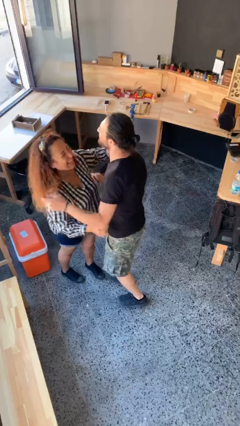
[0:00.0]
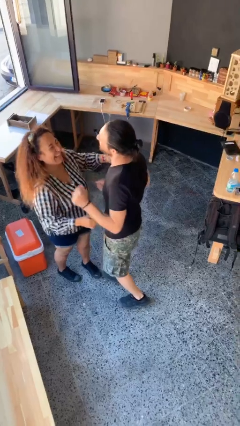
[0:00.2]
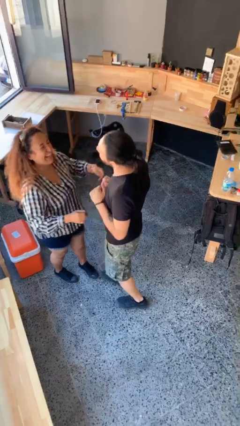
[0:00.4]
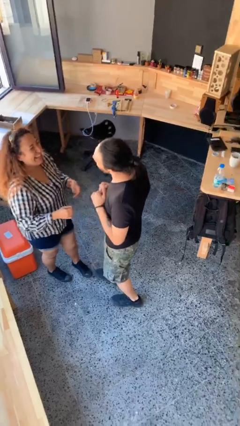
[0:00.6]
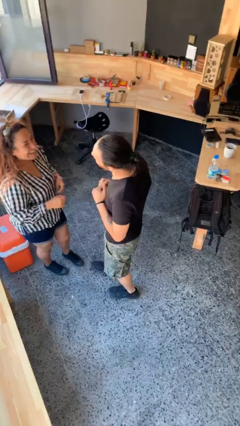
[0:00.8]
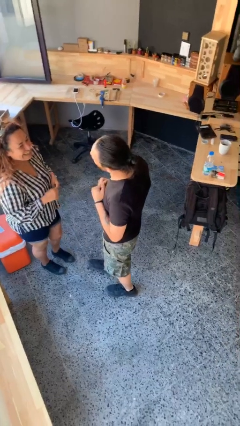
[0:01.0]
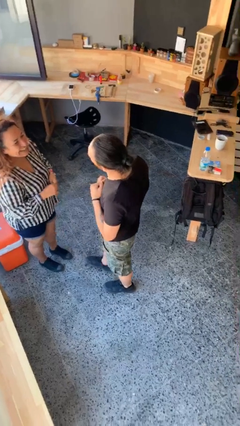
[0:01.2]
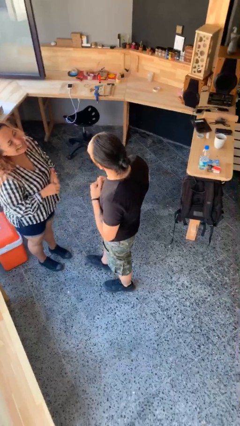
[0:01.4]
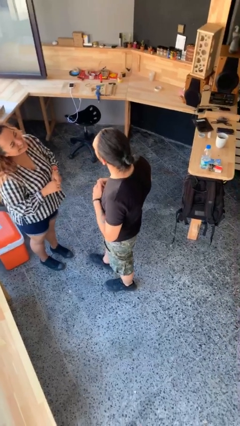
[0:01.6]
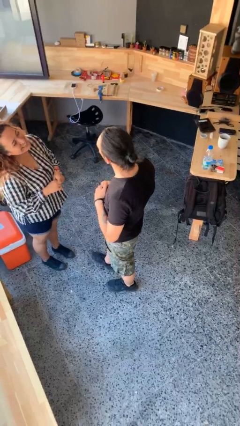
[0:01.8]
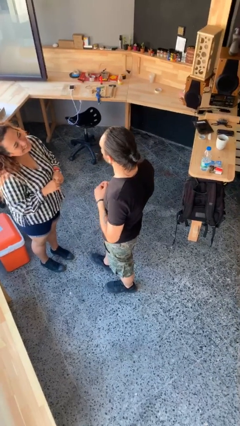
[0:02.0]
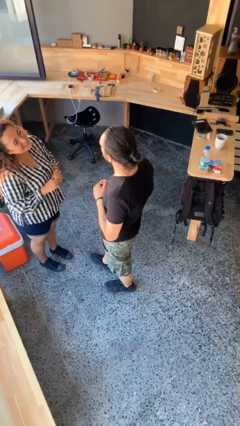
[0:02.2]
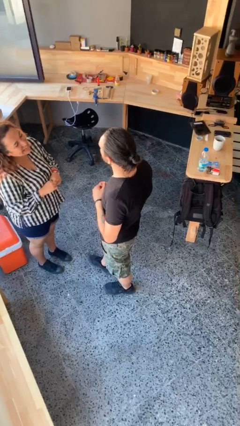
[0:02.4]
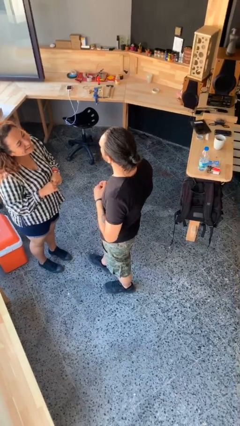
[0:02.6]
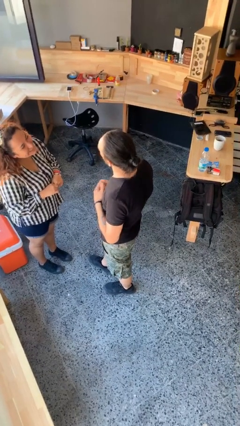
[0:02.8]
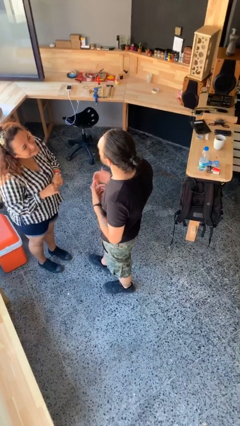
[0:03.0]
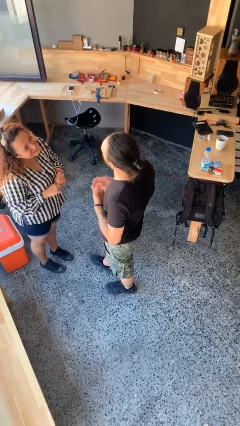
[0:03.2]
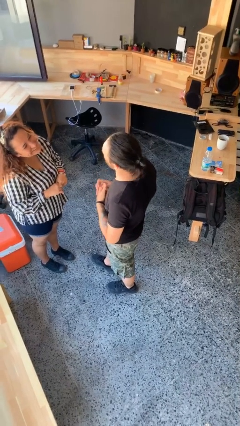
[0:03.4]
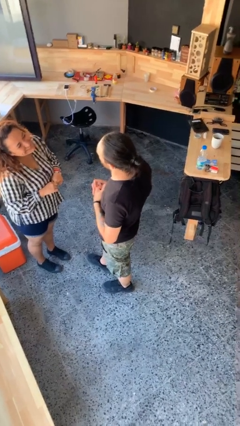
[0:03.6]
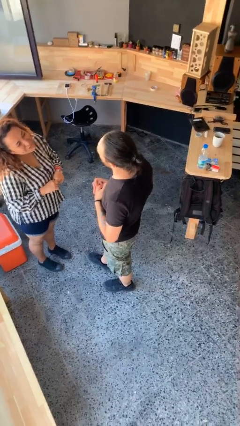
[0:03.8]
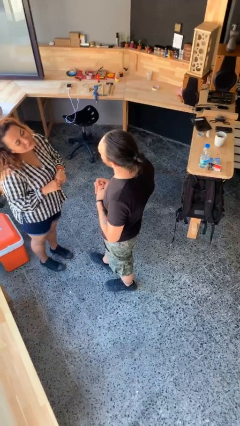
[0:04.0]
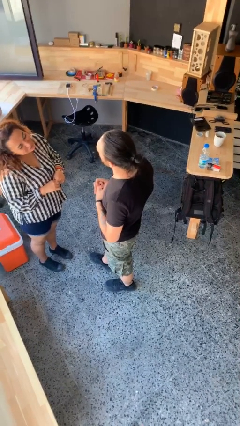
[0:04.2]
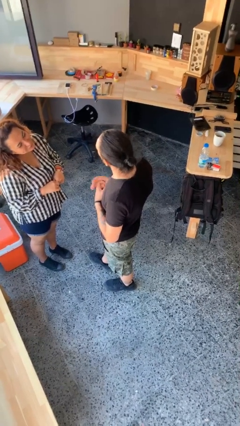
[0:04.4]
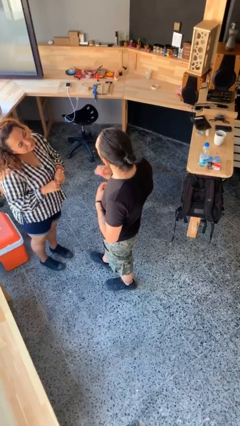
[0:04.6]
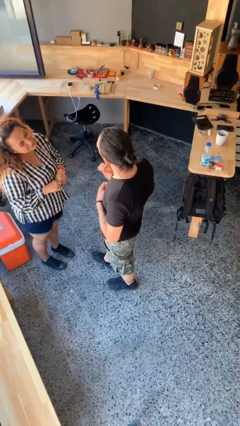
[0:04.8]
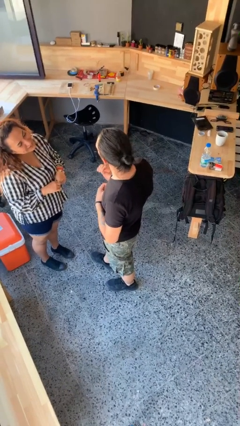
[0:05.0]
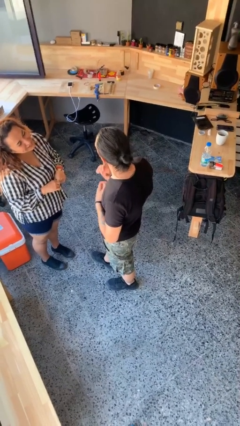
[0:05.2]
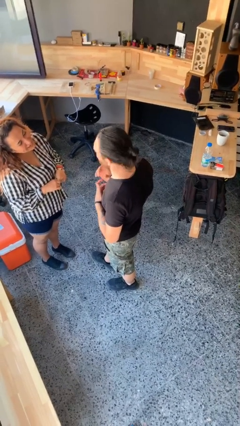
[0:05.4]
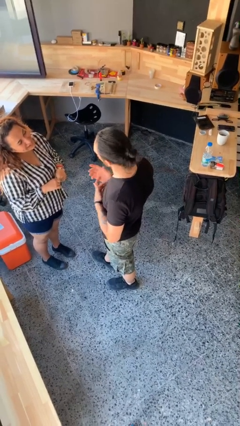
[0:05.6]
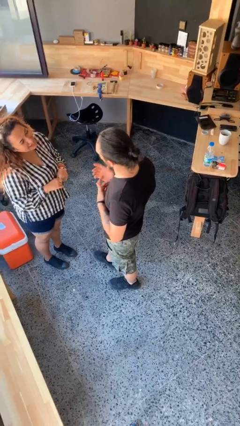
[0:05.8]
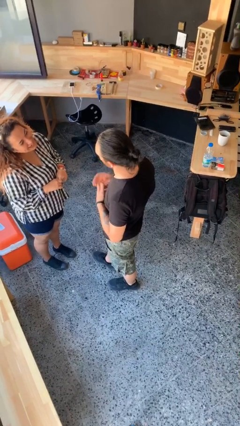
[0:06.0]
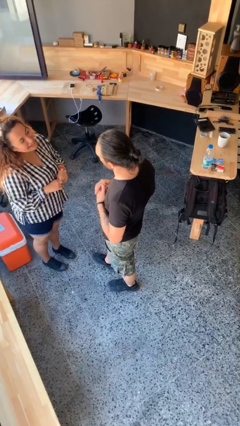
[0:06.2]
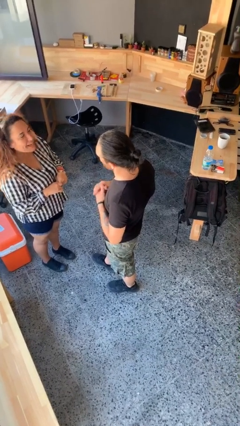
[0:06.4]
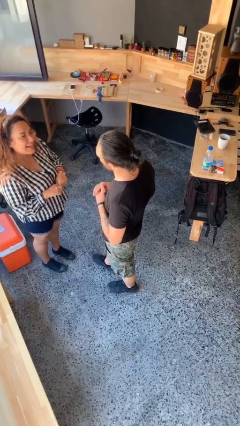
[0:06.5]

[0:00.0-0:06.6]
person talks to person

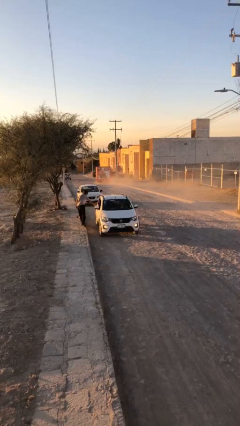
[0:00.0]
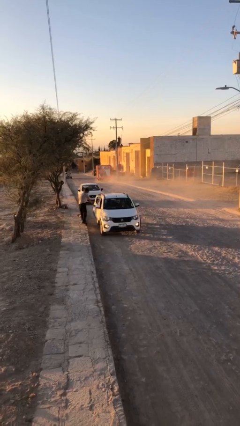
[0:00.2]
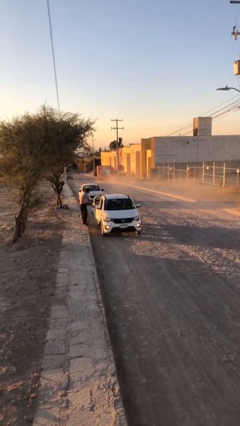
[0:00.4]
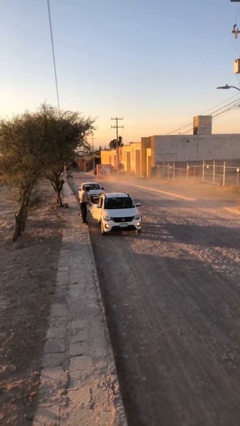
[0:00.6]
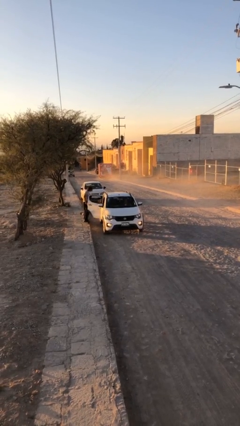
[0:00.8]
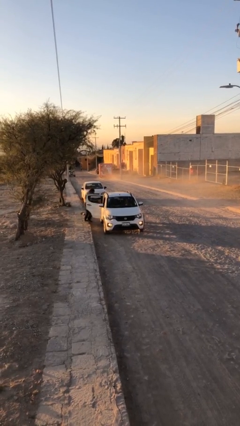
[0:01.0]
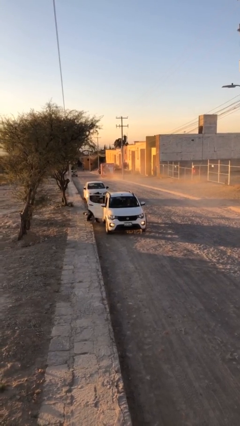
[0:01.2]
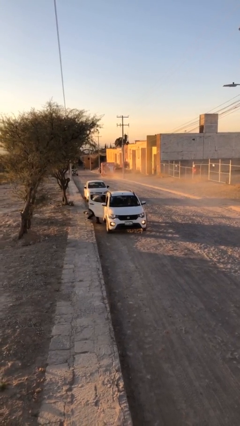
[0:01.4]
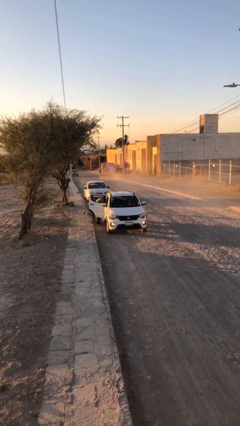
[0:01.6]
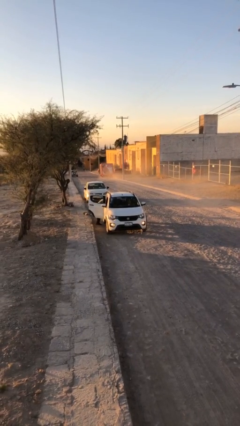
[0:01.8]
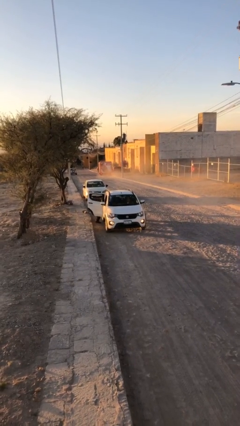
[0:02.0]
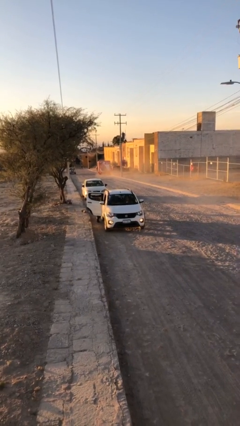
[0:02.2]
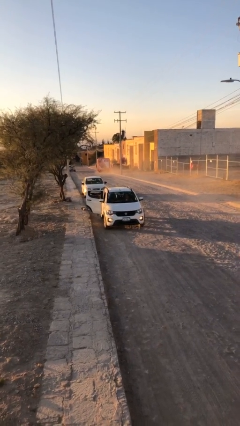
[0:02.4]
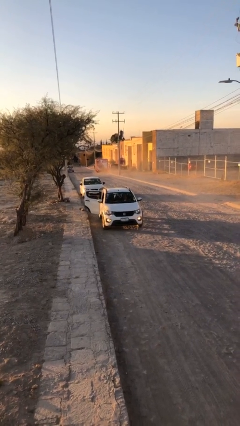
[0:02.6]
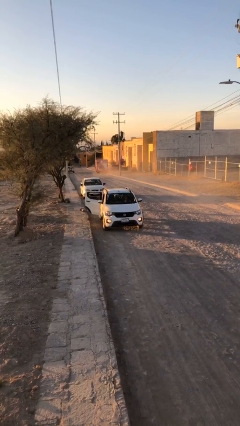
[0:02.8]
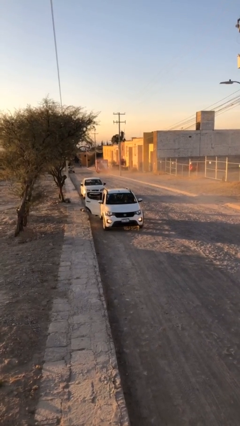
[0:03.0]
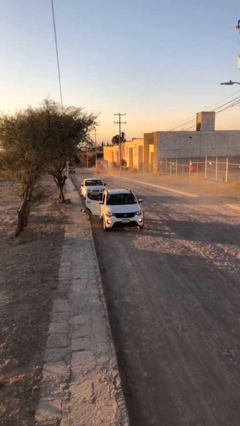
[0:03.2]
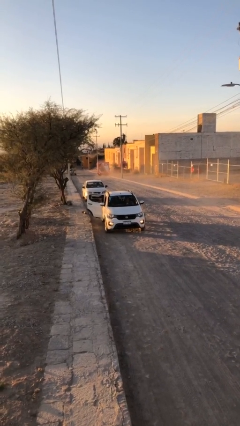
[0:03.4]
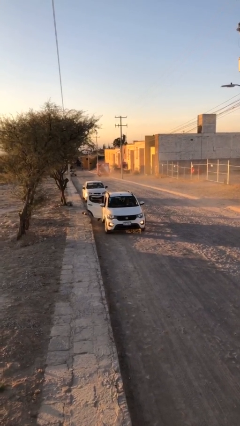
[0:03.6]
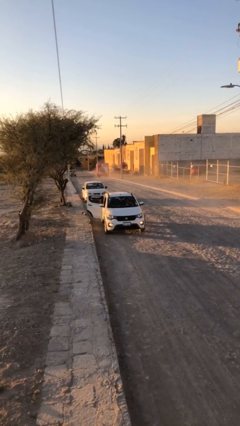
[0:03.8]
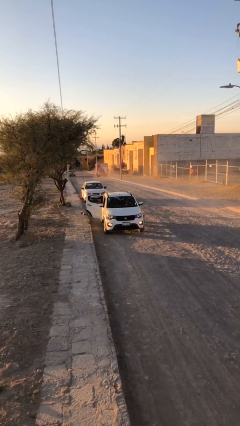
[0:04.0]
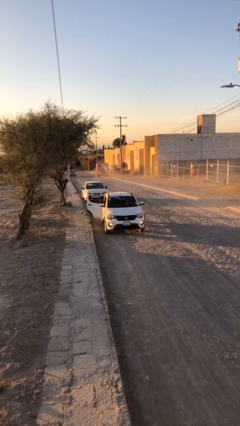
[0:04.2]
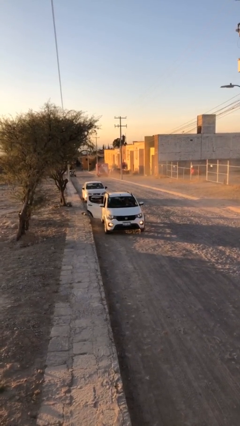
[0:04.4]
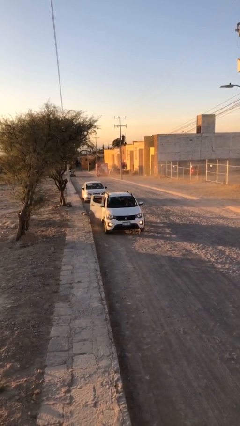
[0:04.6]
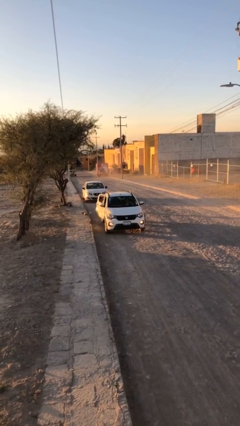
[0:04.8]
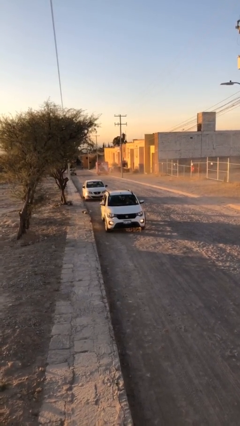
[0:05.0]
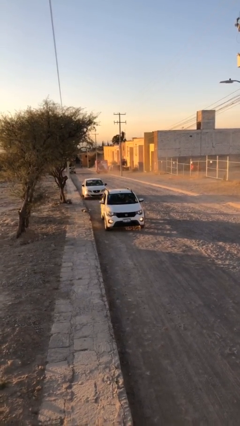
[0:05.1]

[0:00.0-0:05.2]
car picks up person

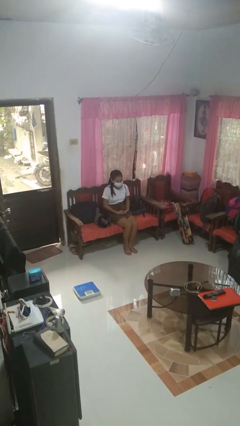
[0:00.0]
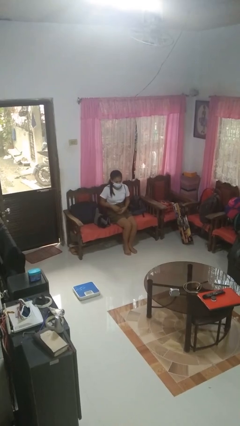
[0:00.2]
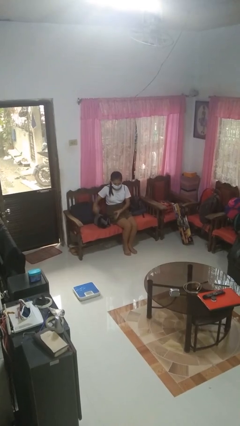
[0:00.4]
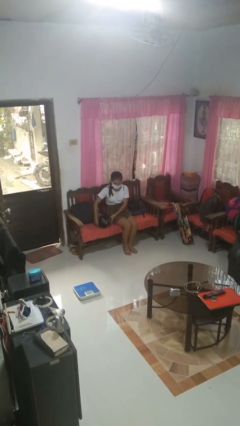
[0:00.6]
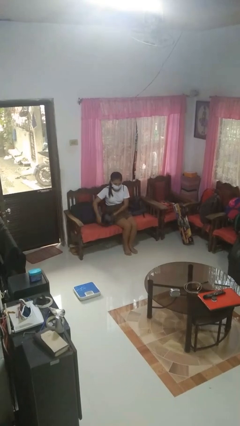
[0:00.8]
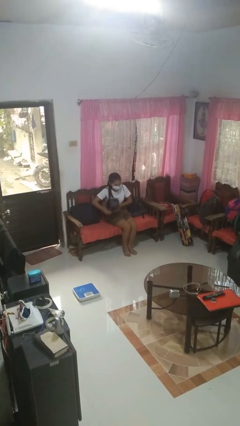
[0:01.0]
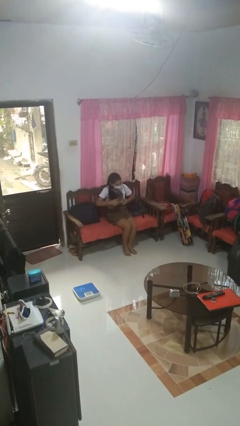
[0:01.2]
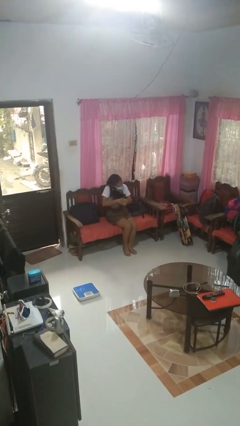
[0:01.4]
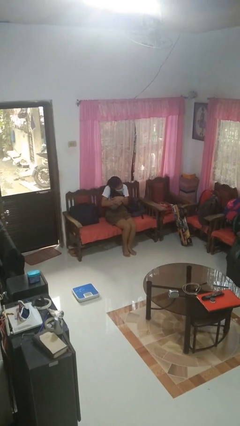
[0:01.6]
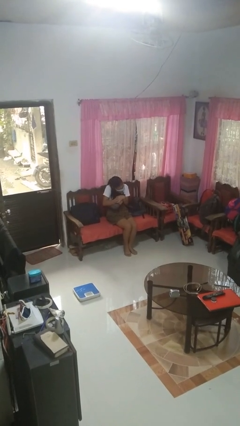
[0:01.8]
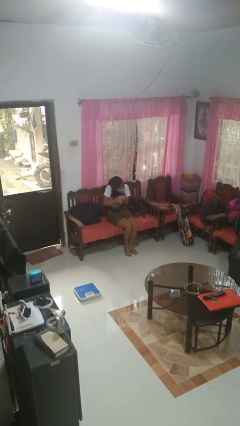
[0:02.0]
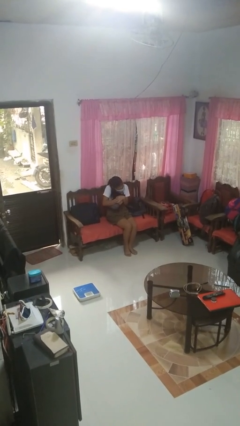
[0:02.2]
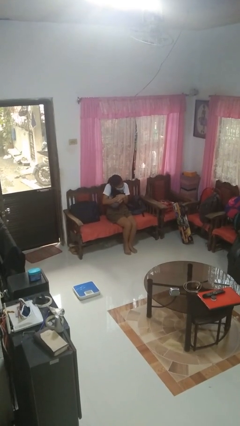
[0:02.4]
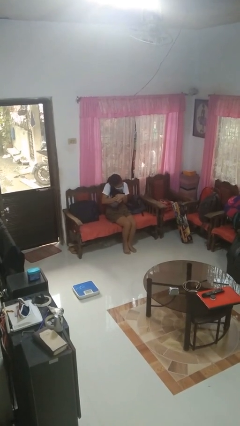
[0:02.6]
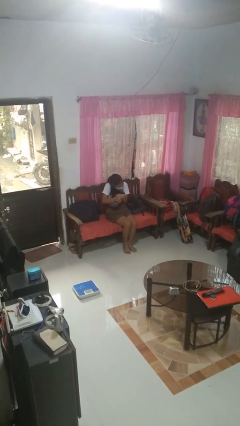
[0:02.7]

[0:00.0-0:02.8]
person hugs stuffed animal

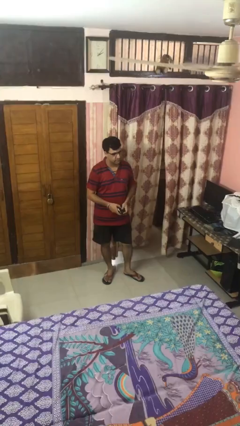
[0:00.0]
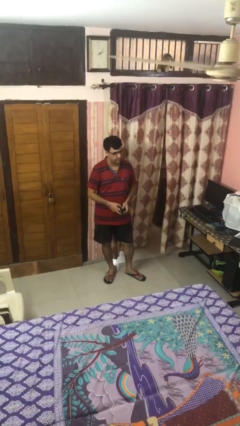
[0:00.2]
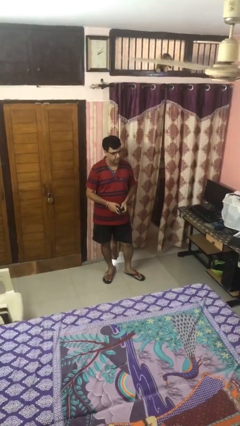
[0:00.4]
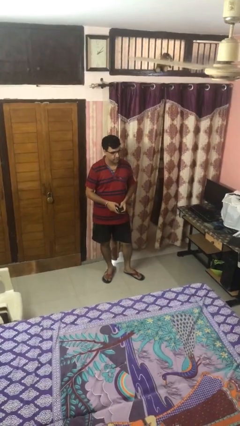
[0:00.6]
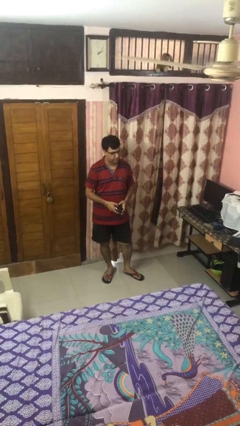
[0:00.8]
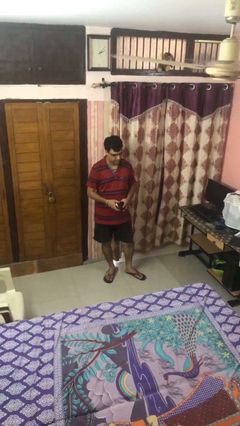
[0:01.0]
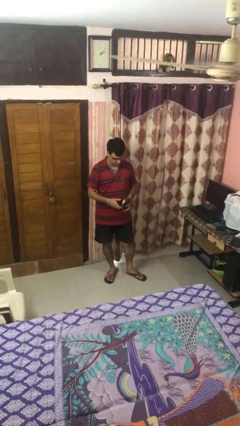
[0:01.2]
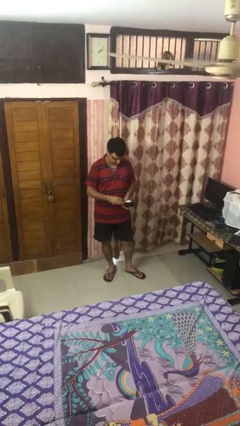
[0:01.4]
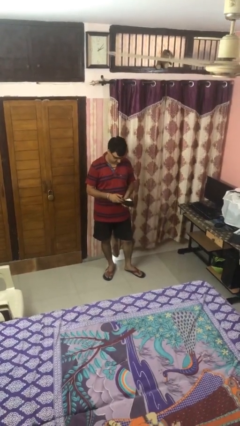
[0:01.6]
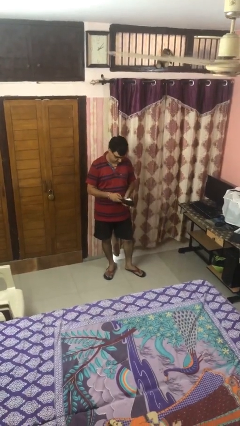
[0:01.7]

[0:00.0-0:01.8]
person searches in purse

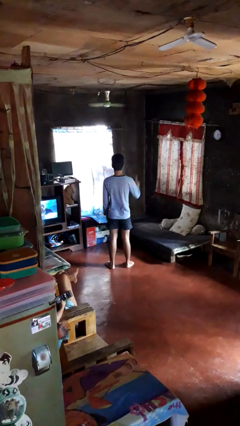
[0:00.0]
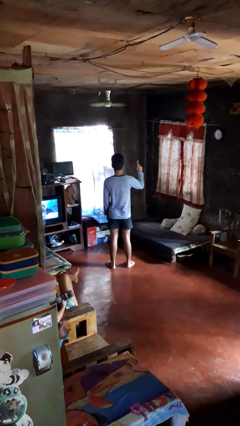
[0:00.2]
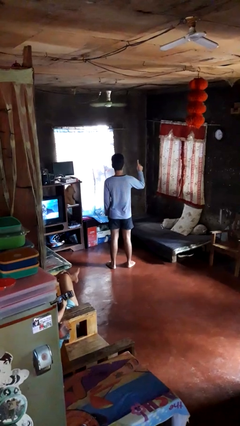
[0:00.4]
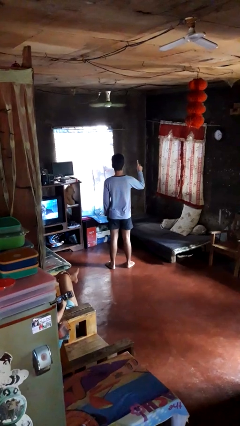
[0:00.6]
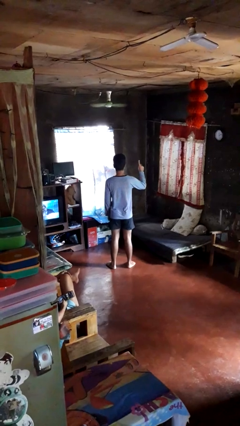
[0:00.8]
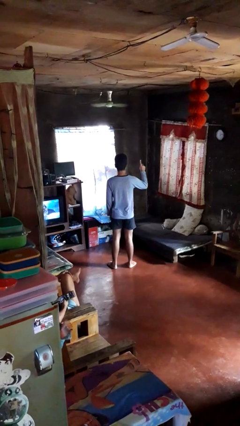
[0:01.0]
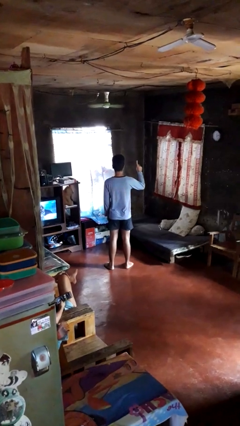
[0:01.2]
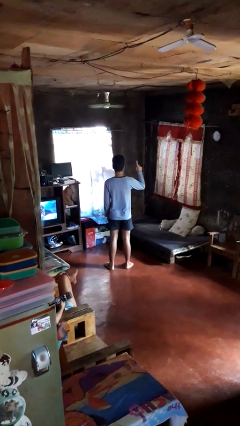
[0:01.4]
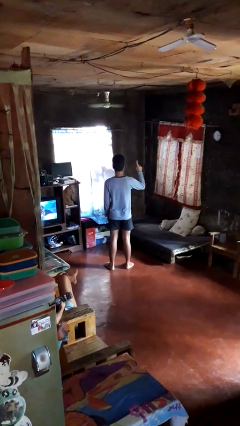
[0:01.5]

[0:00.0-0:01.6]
person gestures number one

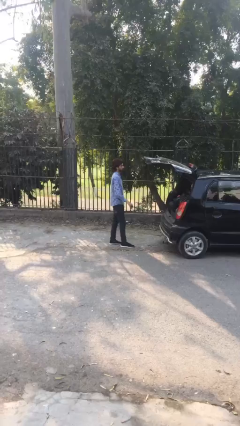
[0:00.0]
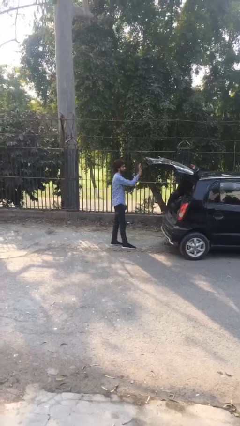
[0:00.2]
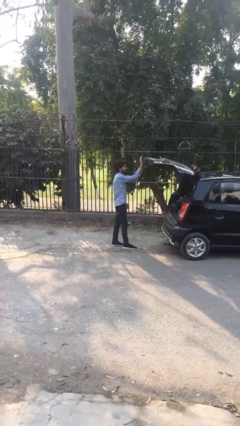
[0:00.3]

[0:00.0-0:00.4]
person closes car trunk
